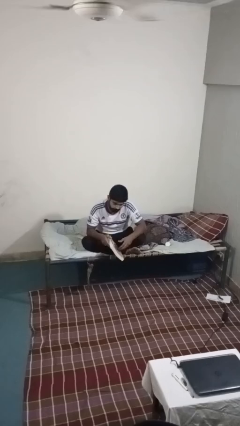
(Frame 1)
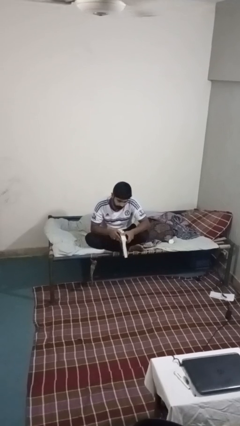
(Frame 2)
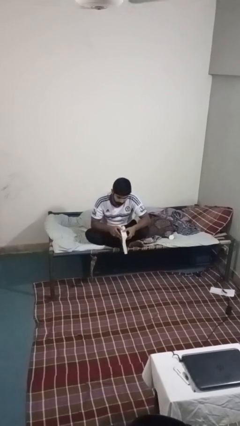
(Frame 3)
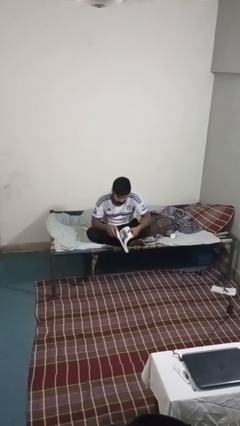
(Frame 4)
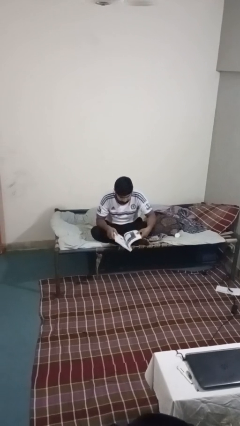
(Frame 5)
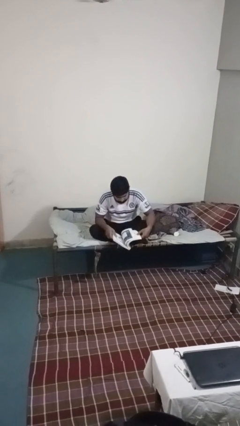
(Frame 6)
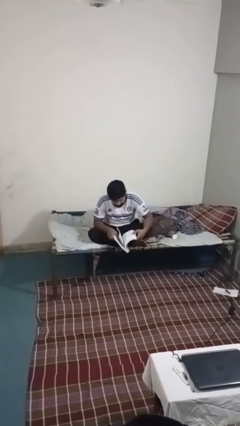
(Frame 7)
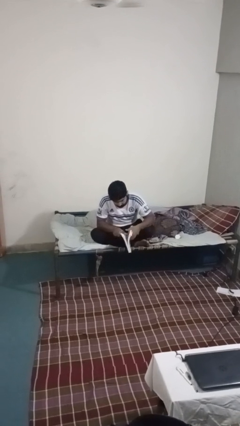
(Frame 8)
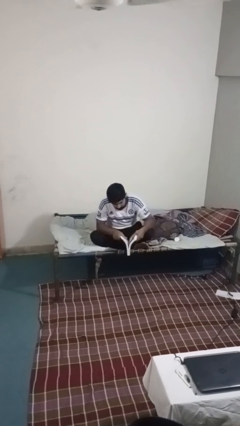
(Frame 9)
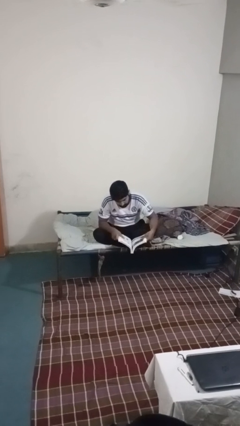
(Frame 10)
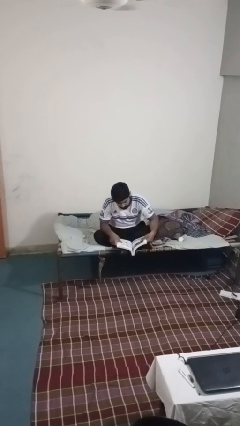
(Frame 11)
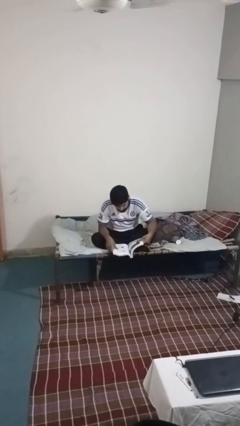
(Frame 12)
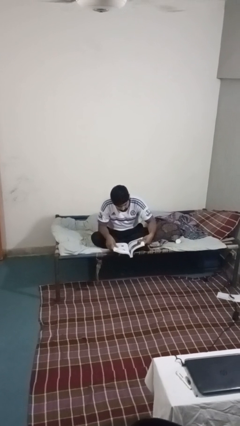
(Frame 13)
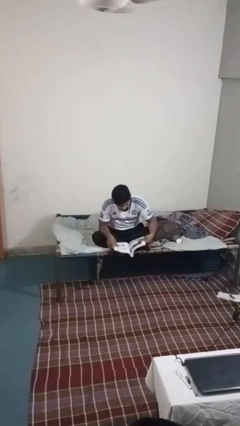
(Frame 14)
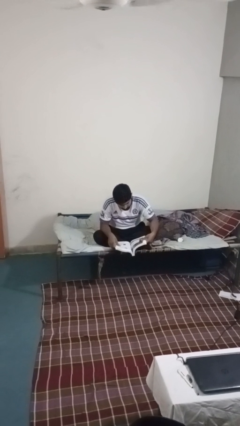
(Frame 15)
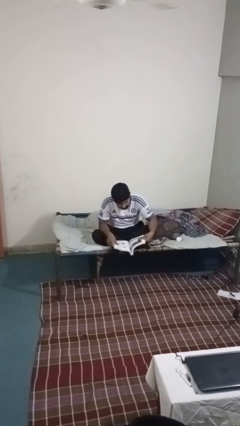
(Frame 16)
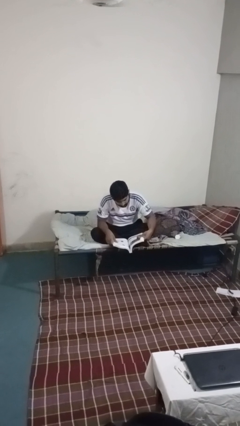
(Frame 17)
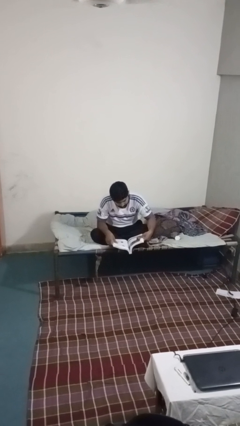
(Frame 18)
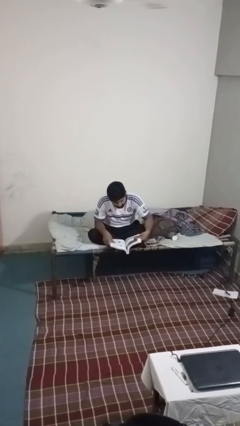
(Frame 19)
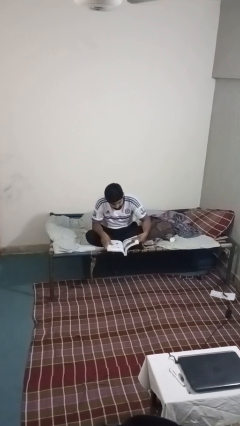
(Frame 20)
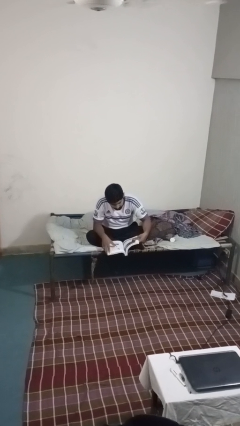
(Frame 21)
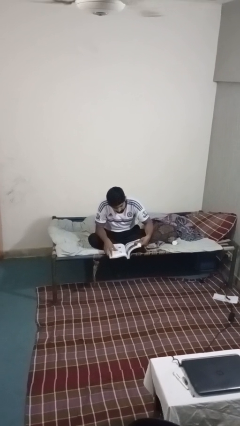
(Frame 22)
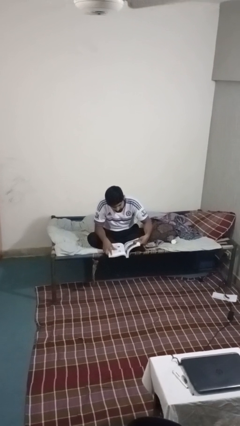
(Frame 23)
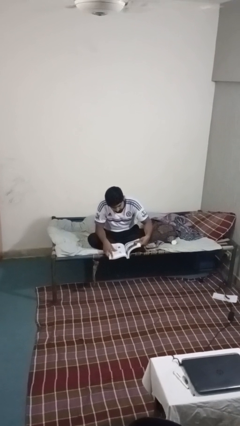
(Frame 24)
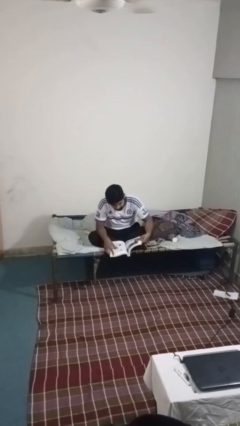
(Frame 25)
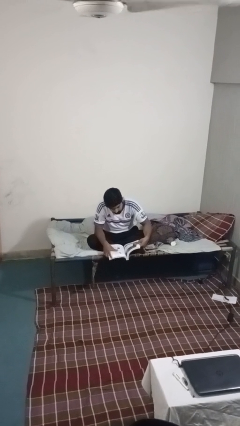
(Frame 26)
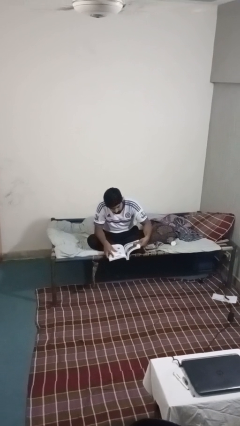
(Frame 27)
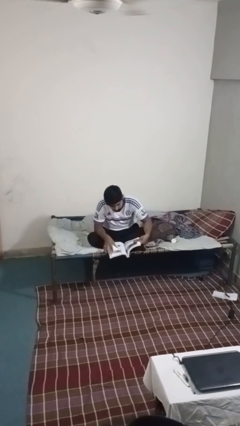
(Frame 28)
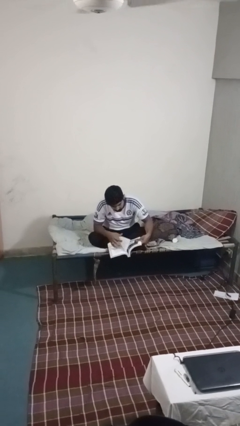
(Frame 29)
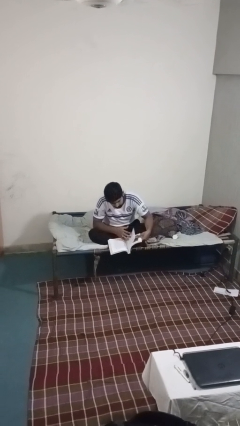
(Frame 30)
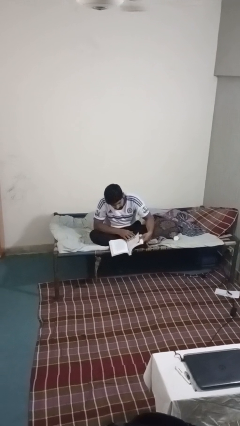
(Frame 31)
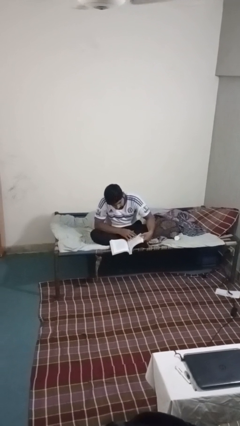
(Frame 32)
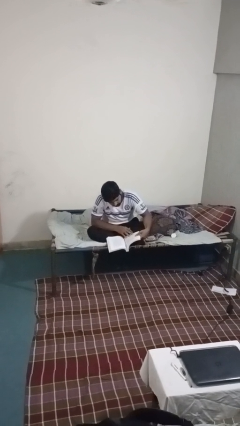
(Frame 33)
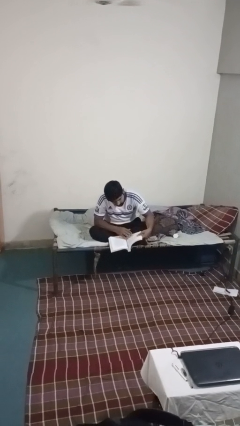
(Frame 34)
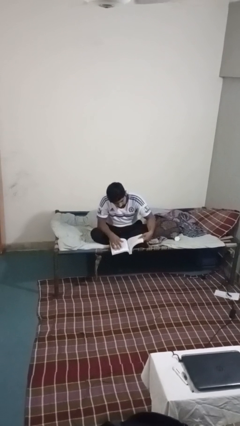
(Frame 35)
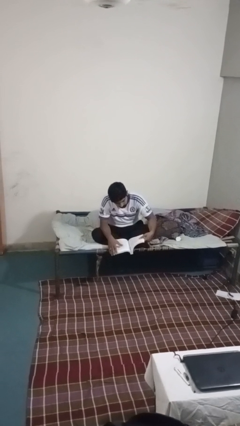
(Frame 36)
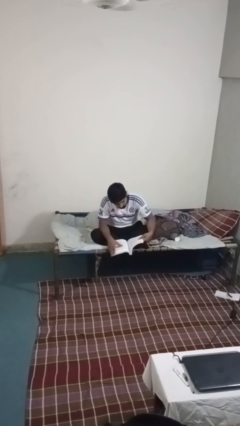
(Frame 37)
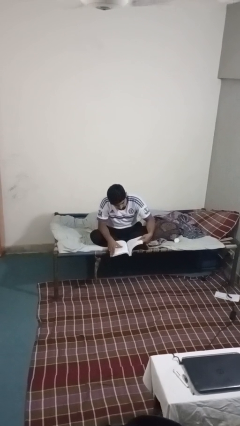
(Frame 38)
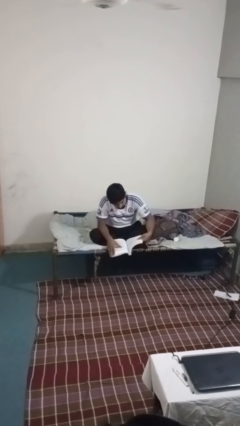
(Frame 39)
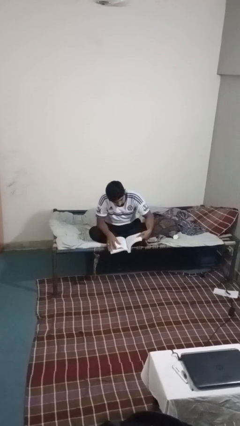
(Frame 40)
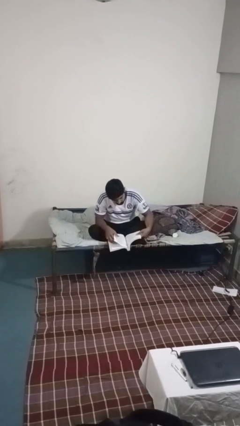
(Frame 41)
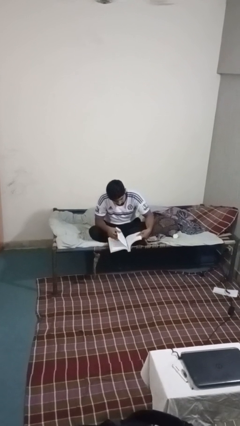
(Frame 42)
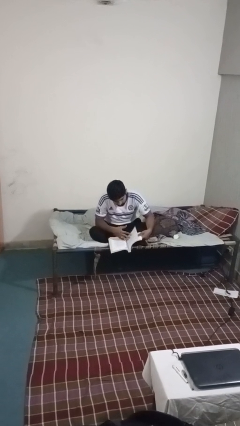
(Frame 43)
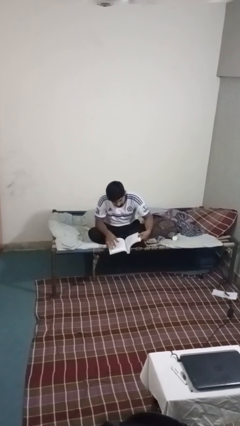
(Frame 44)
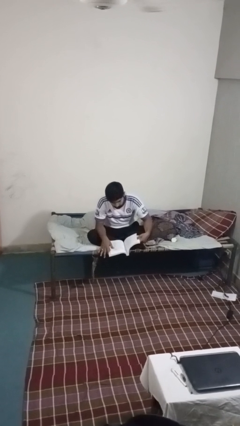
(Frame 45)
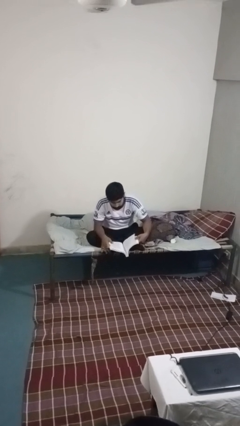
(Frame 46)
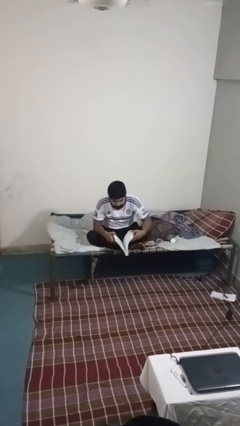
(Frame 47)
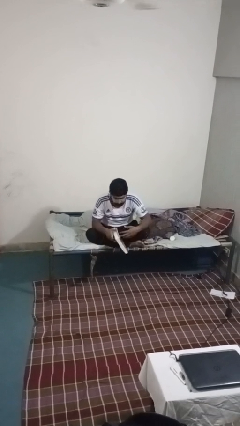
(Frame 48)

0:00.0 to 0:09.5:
person reads book
